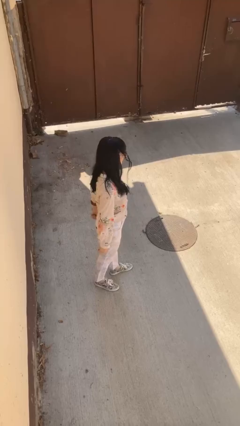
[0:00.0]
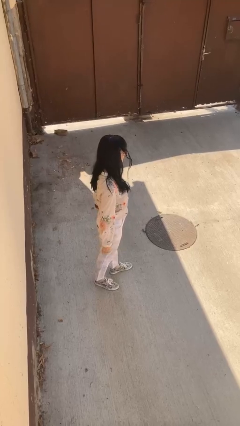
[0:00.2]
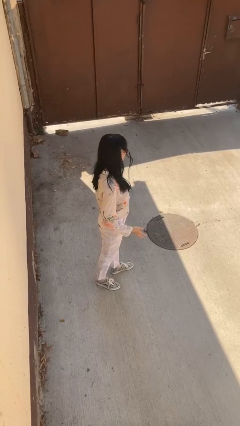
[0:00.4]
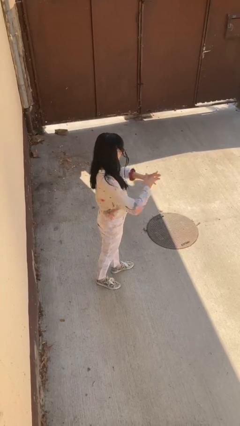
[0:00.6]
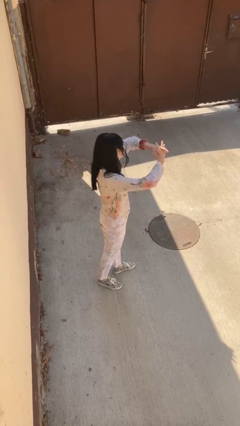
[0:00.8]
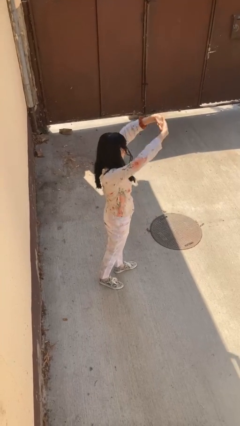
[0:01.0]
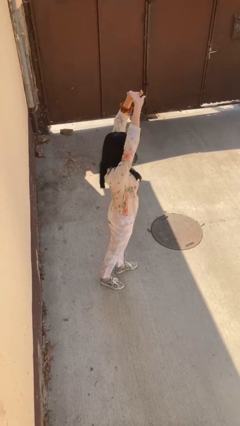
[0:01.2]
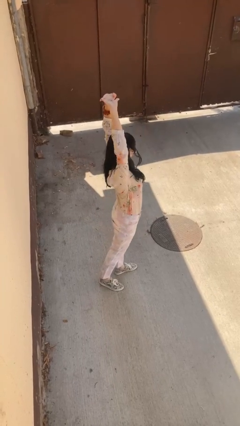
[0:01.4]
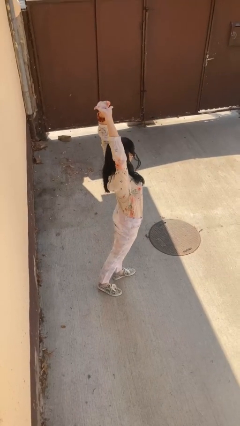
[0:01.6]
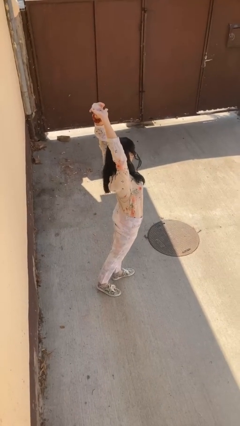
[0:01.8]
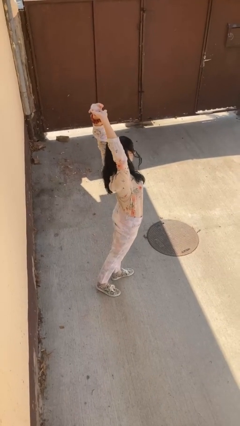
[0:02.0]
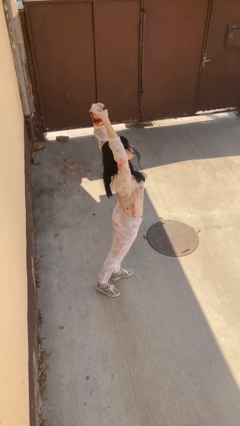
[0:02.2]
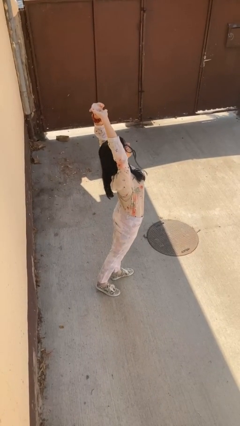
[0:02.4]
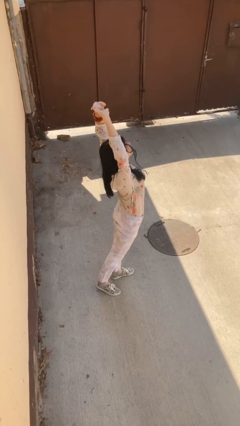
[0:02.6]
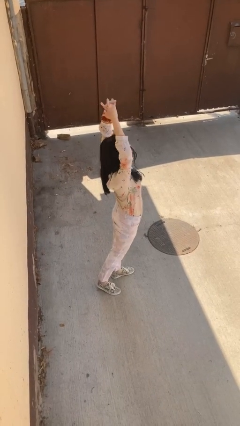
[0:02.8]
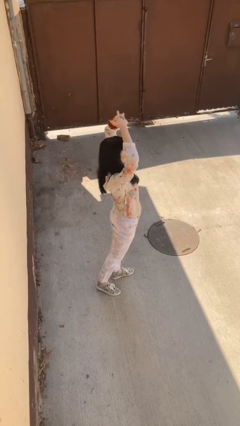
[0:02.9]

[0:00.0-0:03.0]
person stretches arms over head

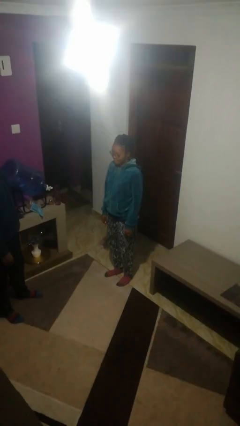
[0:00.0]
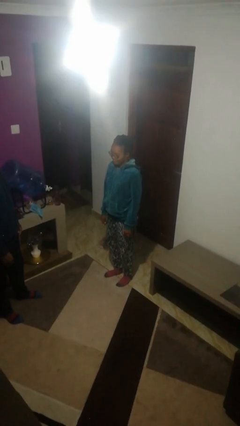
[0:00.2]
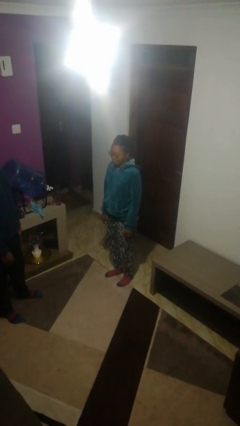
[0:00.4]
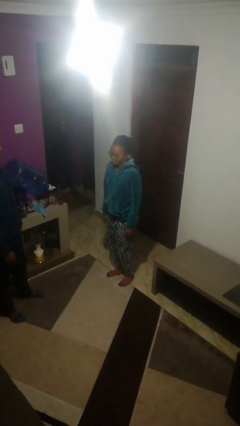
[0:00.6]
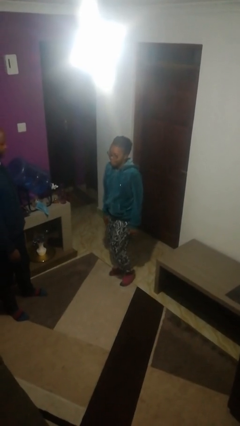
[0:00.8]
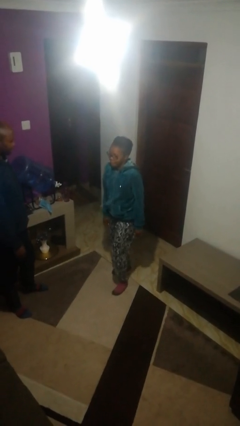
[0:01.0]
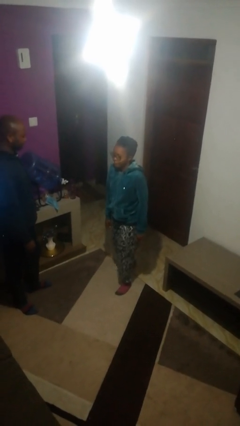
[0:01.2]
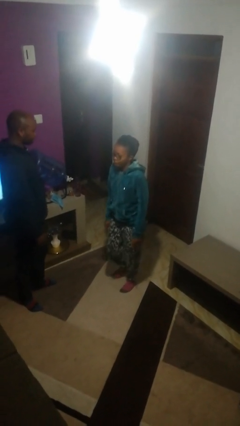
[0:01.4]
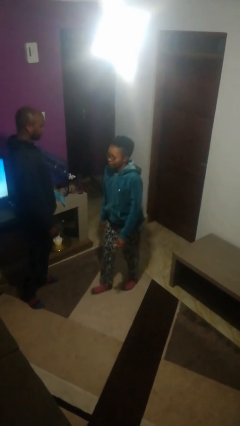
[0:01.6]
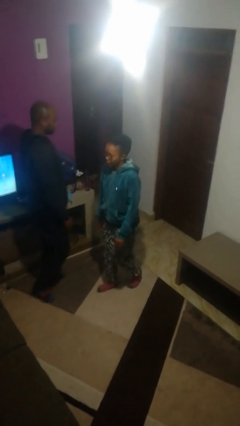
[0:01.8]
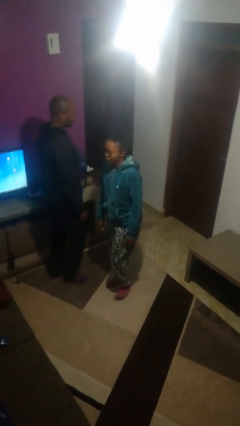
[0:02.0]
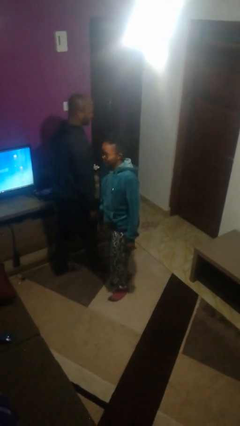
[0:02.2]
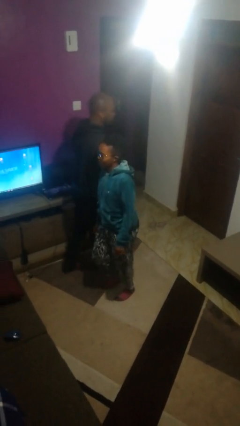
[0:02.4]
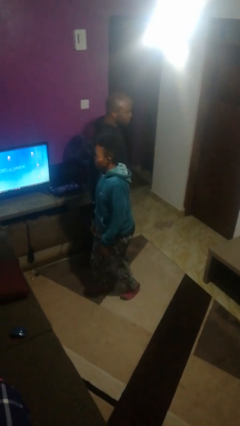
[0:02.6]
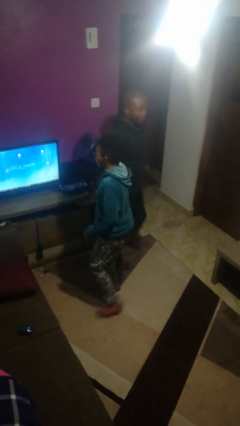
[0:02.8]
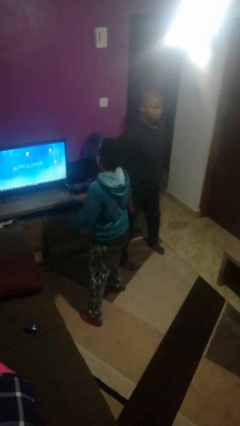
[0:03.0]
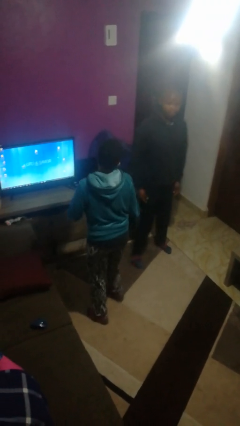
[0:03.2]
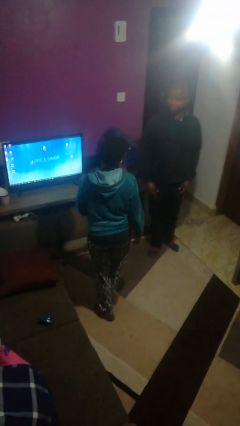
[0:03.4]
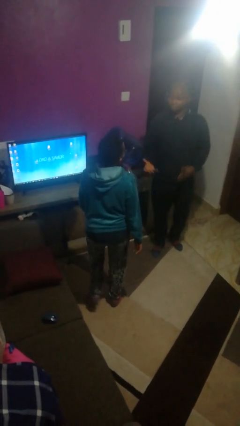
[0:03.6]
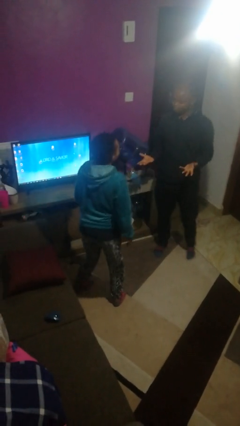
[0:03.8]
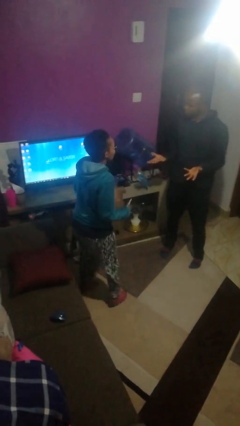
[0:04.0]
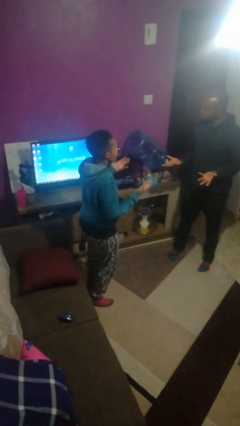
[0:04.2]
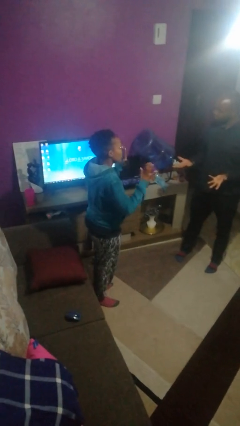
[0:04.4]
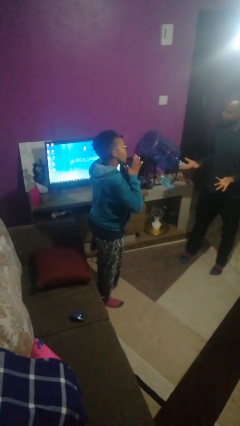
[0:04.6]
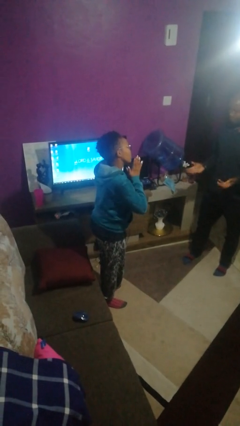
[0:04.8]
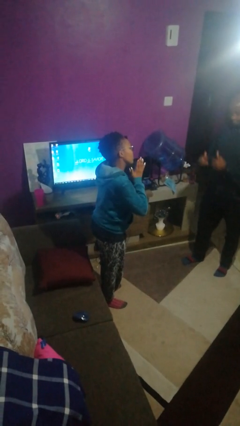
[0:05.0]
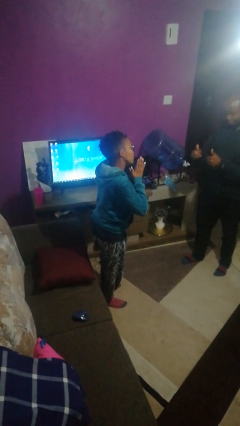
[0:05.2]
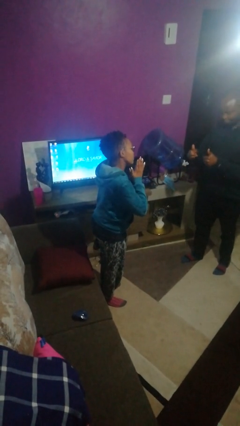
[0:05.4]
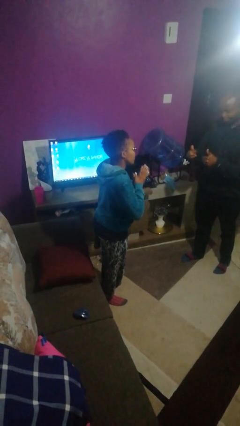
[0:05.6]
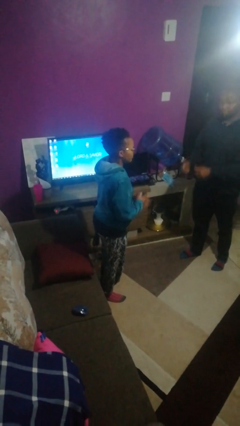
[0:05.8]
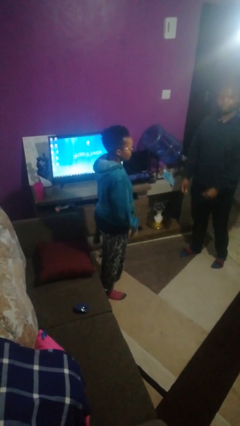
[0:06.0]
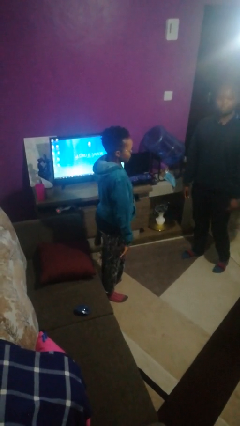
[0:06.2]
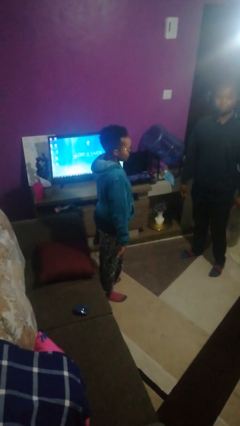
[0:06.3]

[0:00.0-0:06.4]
person bumps into person

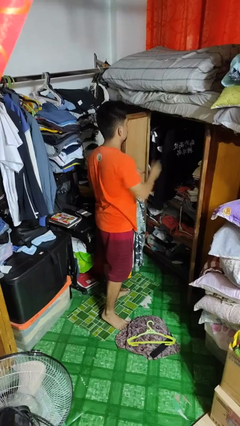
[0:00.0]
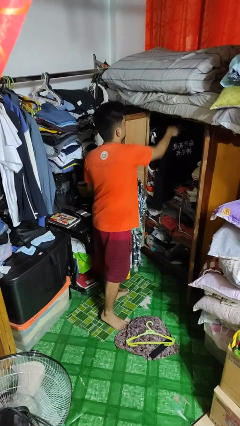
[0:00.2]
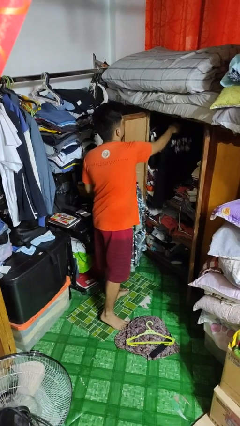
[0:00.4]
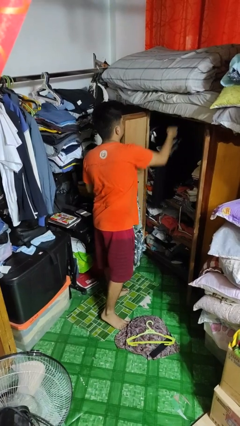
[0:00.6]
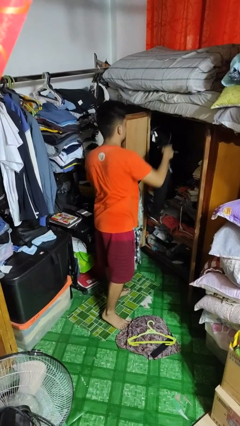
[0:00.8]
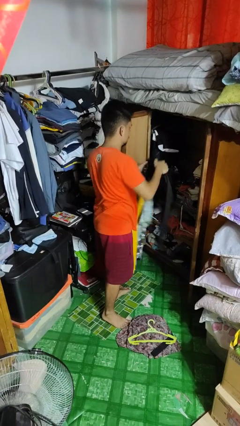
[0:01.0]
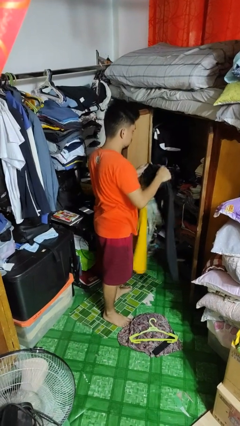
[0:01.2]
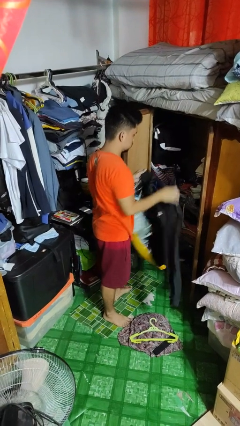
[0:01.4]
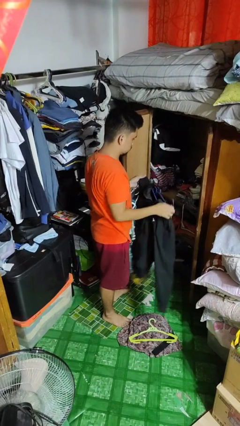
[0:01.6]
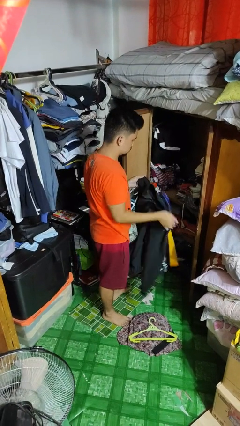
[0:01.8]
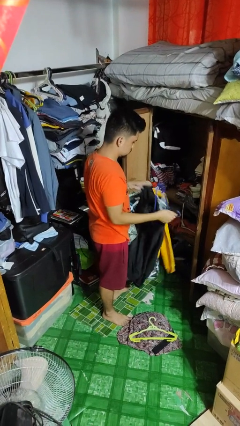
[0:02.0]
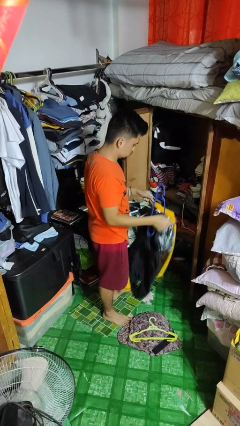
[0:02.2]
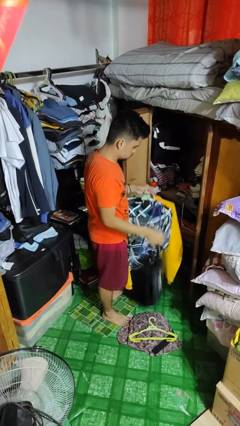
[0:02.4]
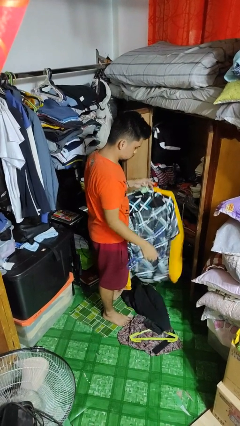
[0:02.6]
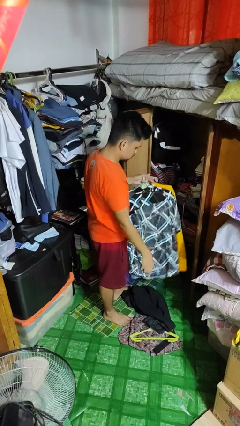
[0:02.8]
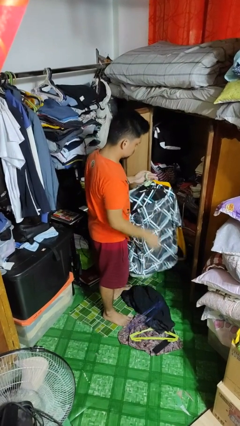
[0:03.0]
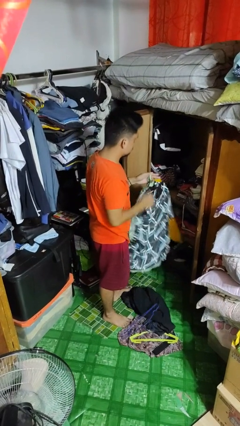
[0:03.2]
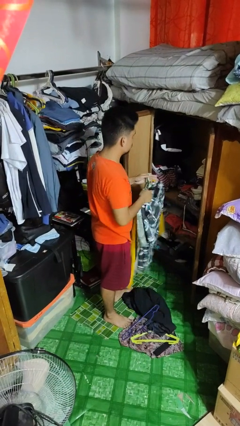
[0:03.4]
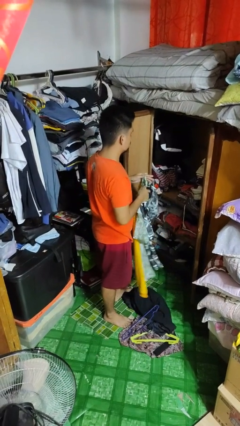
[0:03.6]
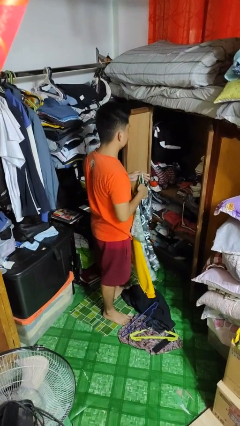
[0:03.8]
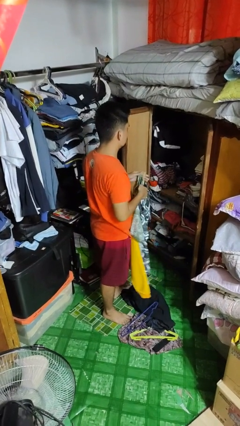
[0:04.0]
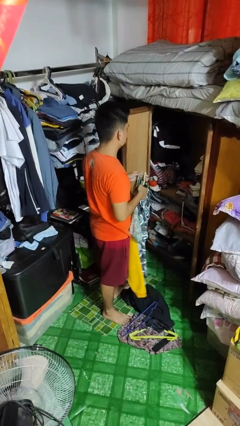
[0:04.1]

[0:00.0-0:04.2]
person takes clothes from closet

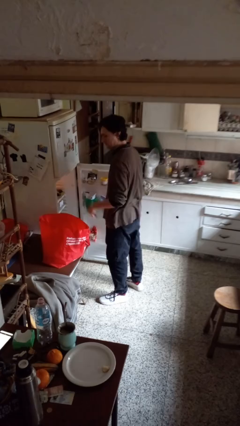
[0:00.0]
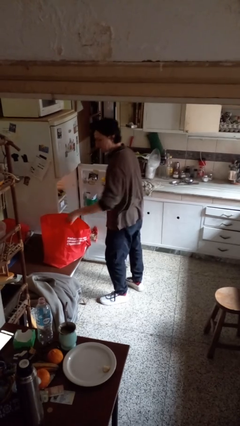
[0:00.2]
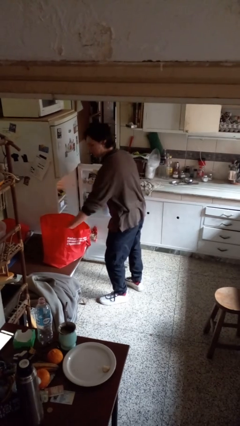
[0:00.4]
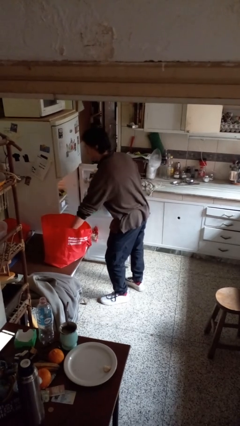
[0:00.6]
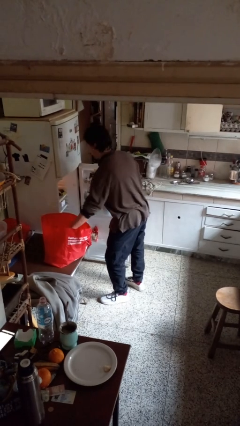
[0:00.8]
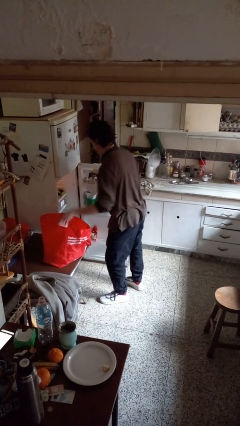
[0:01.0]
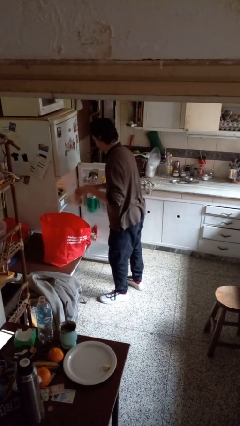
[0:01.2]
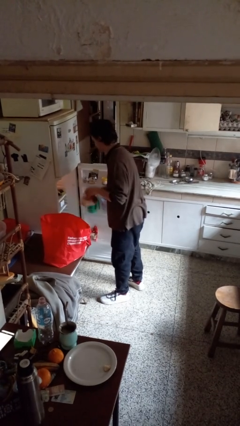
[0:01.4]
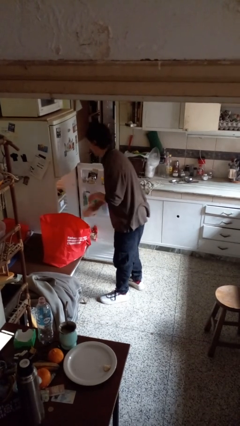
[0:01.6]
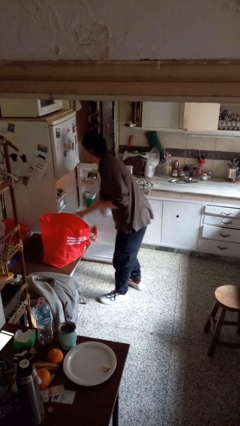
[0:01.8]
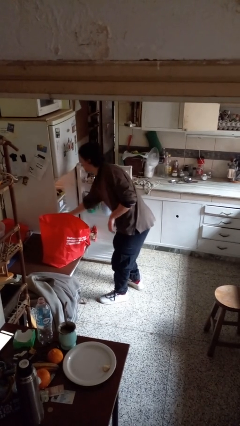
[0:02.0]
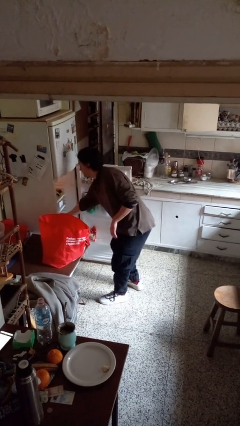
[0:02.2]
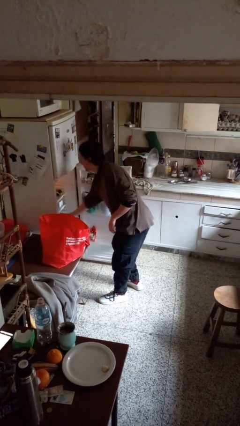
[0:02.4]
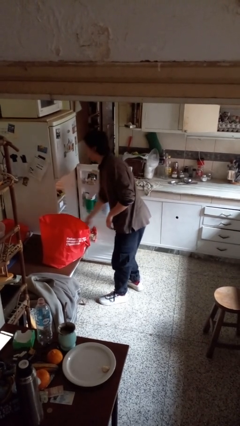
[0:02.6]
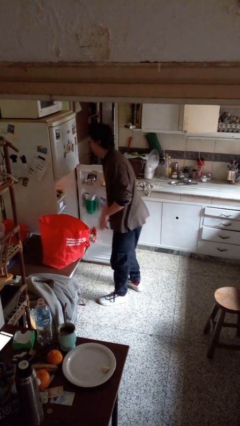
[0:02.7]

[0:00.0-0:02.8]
person loads groceries into refrigerator

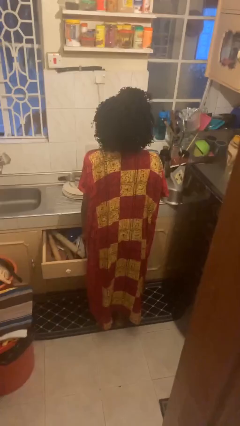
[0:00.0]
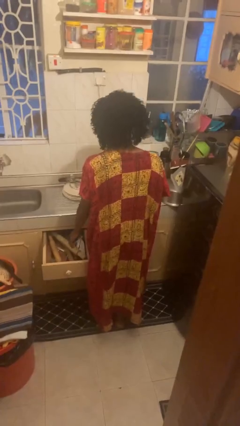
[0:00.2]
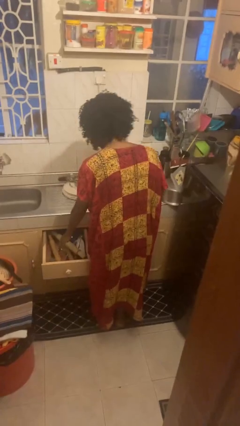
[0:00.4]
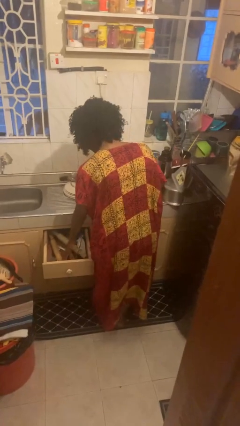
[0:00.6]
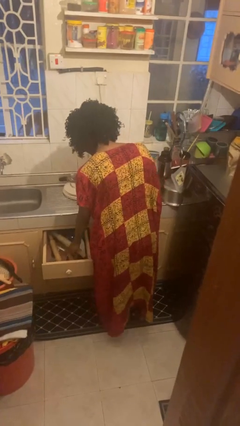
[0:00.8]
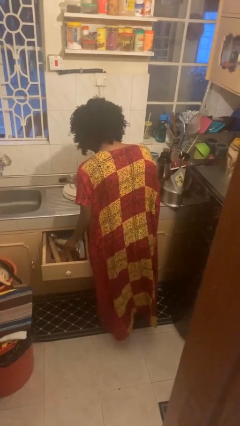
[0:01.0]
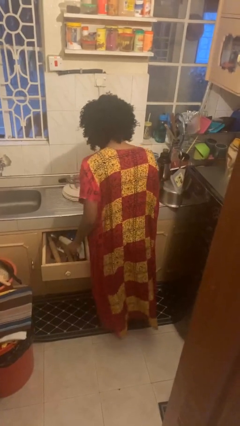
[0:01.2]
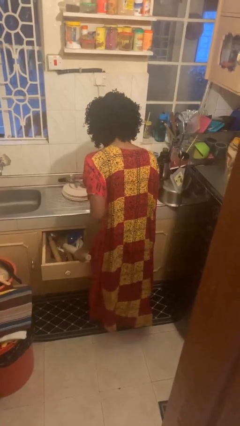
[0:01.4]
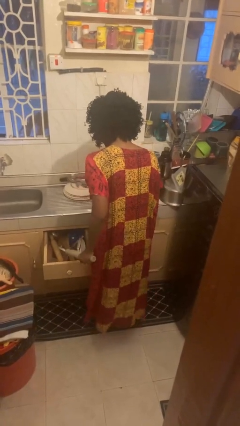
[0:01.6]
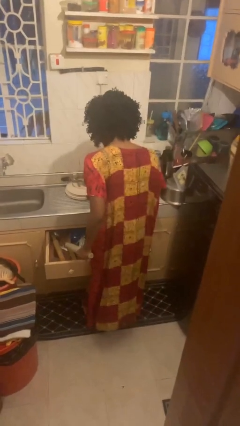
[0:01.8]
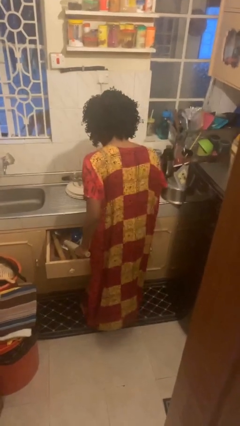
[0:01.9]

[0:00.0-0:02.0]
person takes object from kitchen drawer
